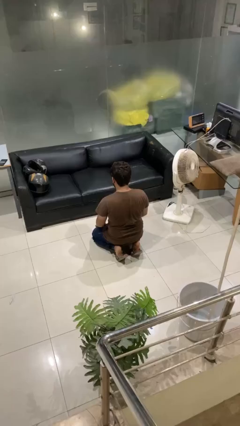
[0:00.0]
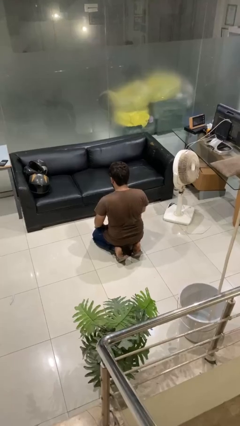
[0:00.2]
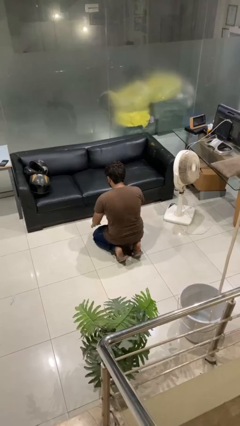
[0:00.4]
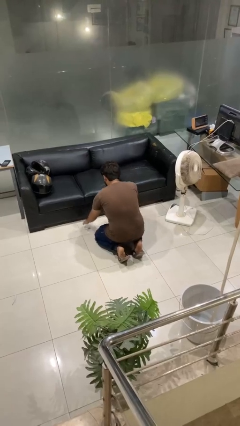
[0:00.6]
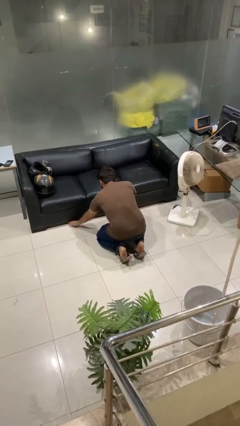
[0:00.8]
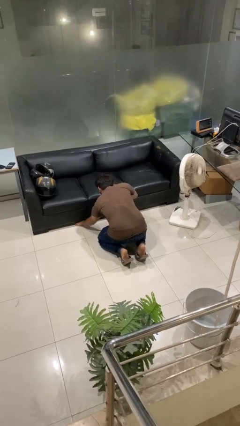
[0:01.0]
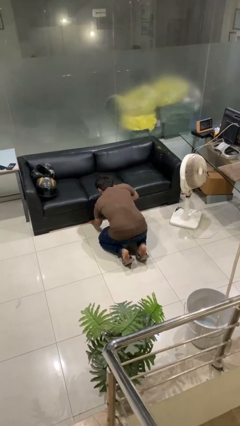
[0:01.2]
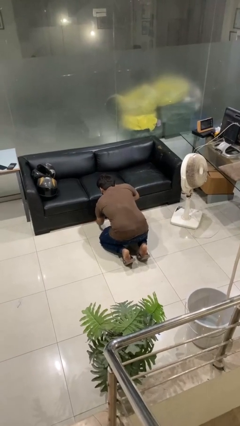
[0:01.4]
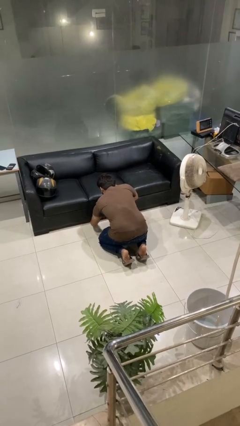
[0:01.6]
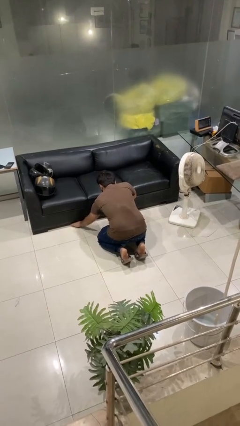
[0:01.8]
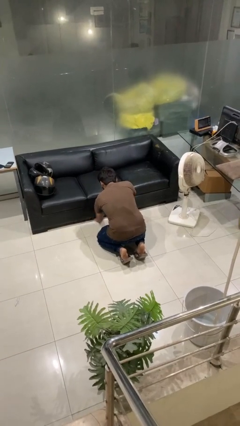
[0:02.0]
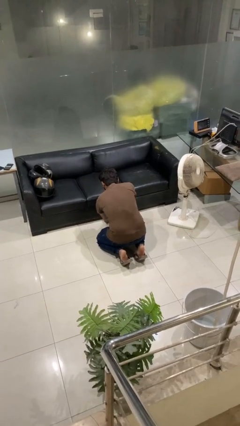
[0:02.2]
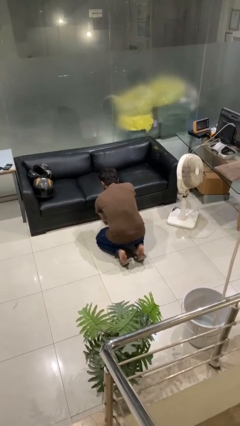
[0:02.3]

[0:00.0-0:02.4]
person searches under couch

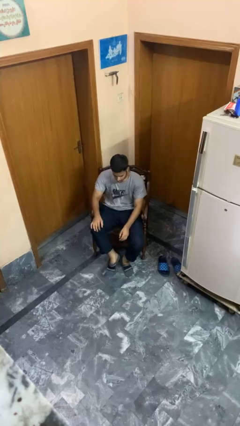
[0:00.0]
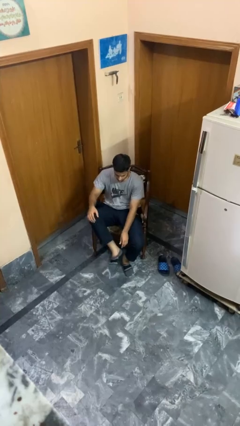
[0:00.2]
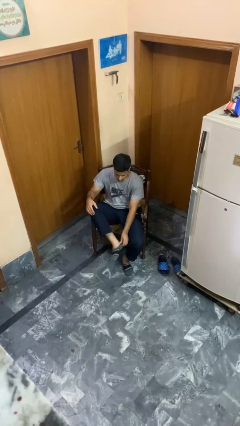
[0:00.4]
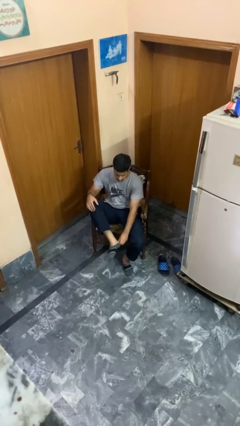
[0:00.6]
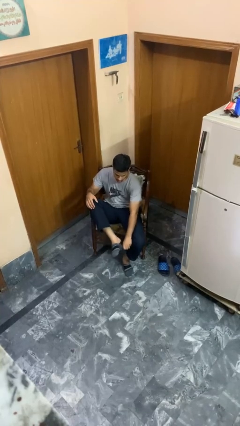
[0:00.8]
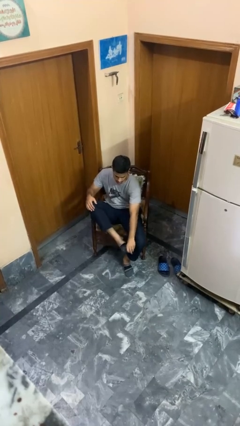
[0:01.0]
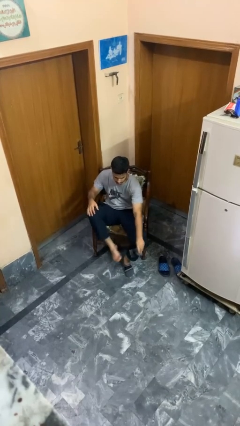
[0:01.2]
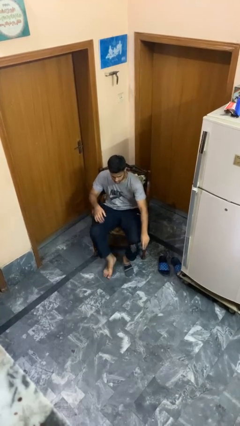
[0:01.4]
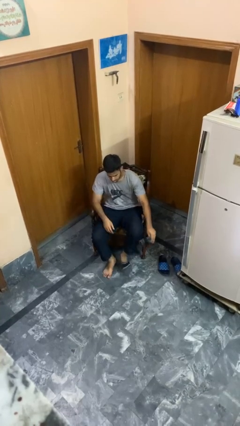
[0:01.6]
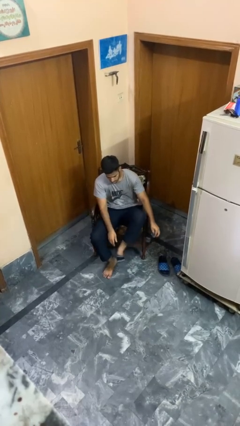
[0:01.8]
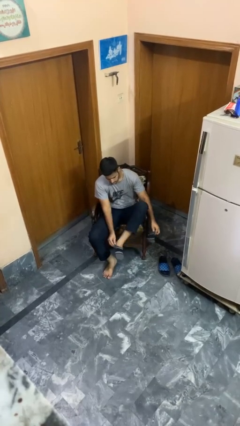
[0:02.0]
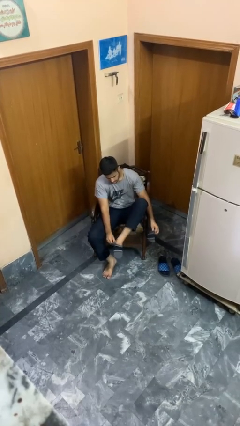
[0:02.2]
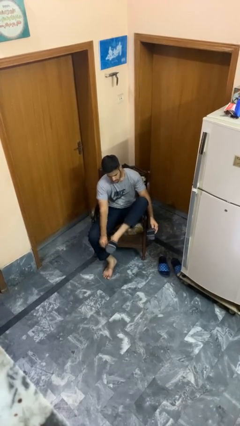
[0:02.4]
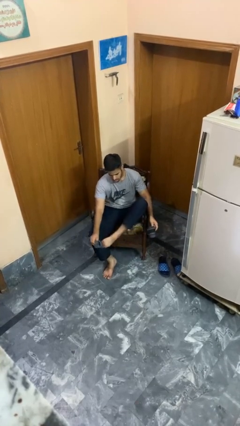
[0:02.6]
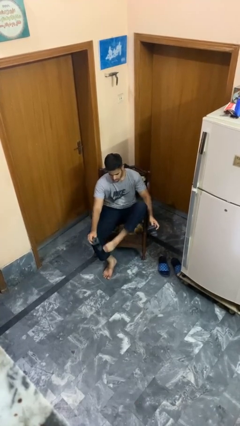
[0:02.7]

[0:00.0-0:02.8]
person takes off socks

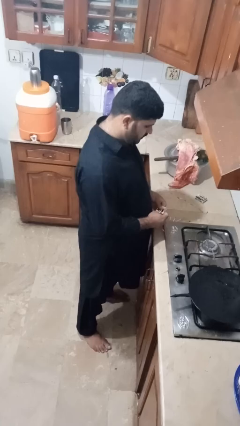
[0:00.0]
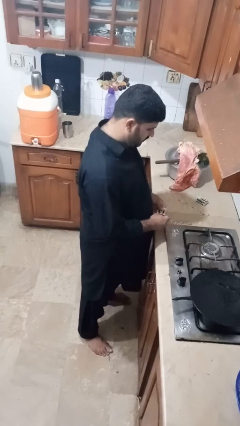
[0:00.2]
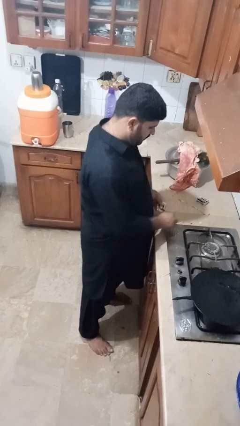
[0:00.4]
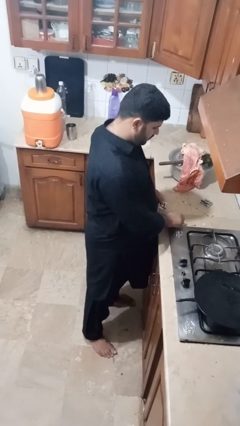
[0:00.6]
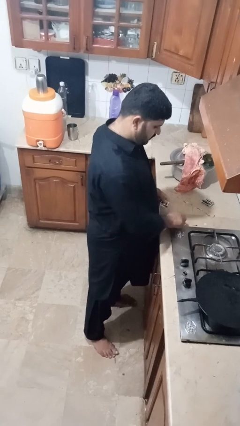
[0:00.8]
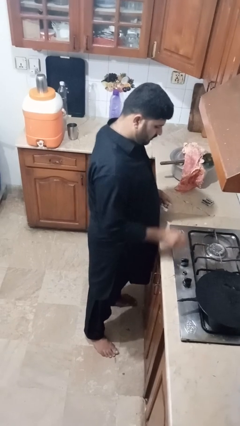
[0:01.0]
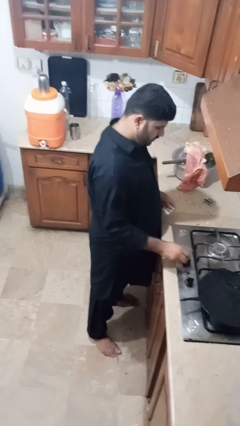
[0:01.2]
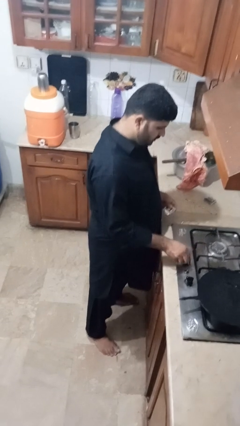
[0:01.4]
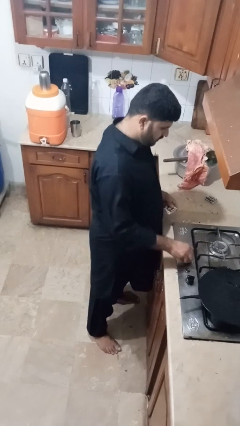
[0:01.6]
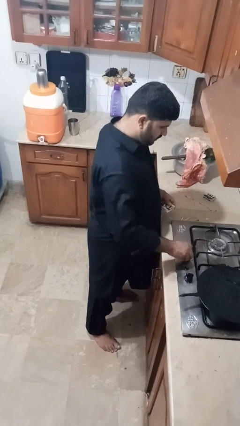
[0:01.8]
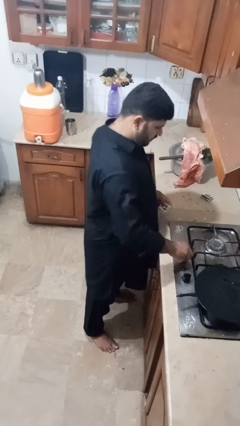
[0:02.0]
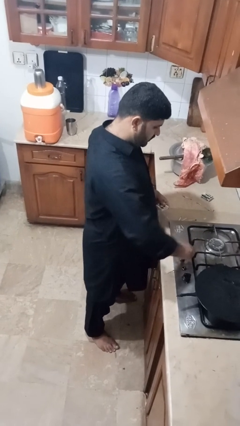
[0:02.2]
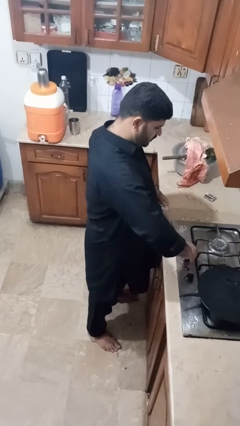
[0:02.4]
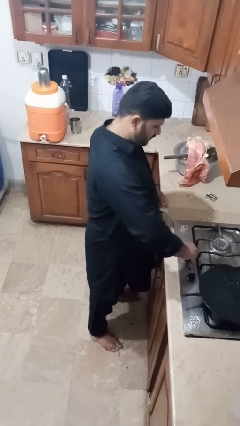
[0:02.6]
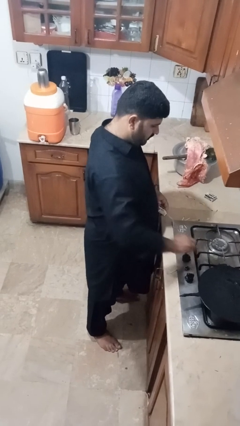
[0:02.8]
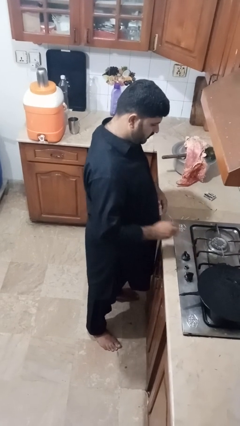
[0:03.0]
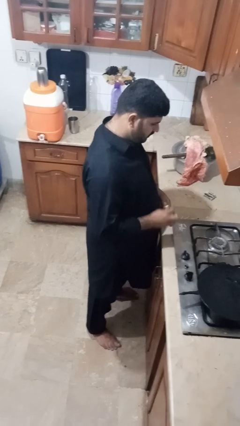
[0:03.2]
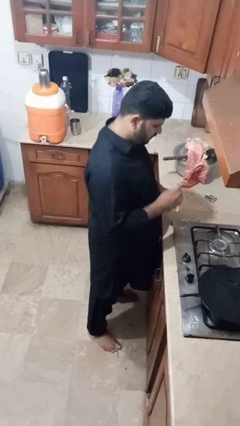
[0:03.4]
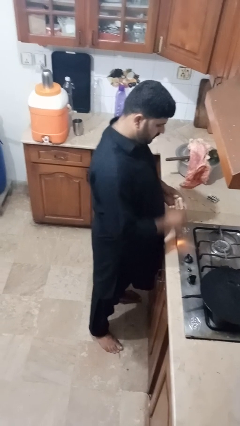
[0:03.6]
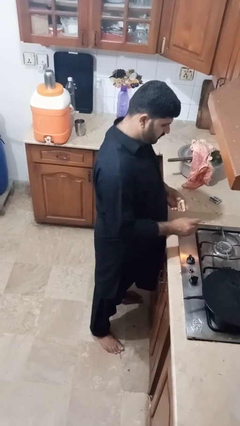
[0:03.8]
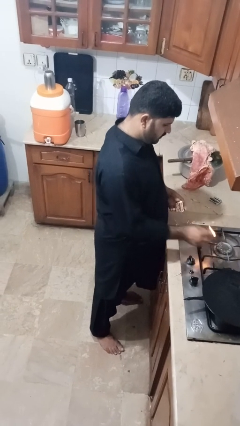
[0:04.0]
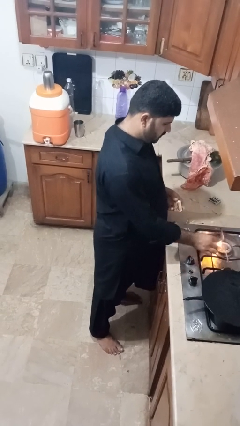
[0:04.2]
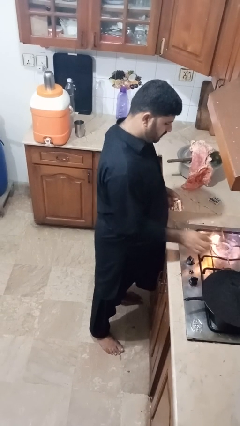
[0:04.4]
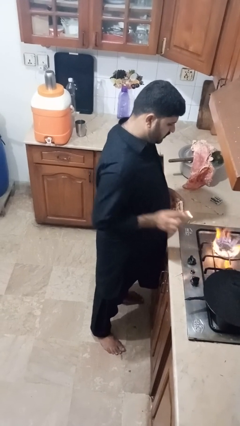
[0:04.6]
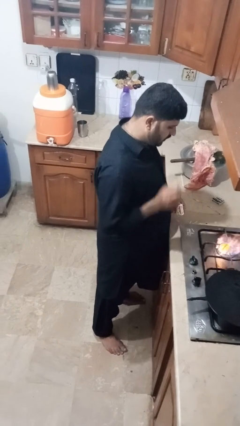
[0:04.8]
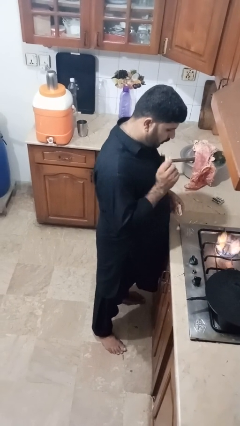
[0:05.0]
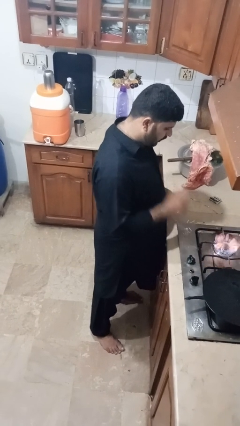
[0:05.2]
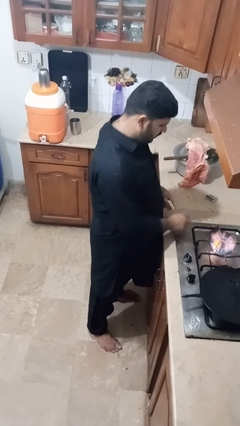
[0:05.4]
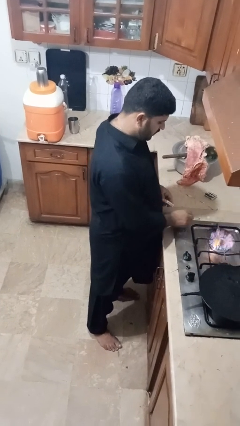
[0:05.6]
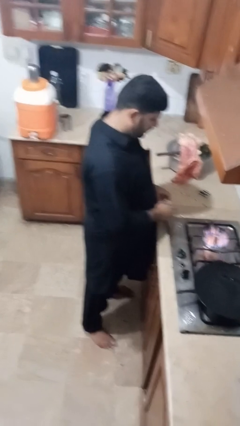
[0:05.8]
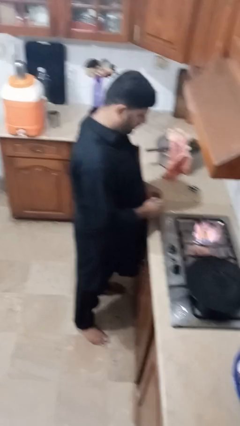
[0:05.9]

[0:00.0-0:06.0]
person turns on stovetop

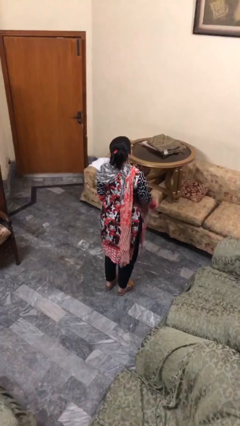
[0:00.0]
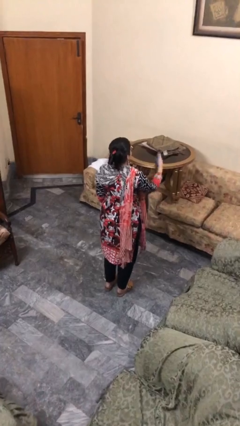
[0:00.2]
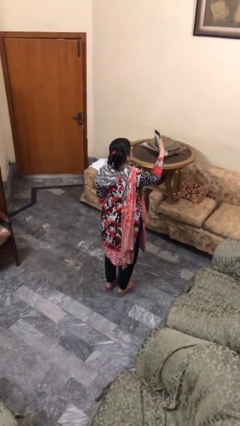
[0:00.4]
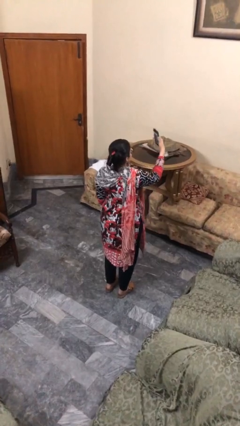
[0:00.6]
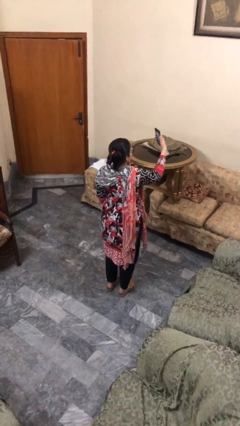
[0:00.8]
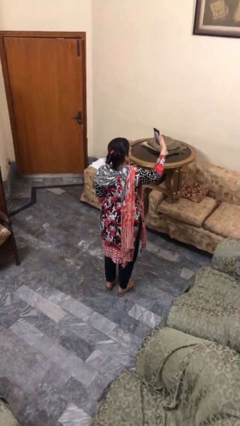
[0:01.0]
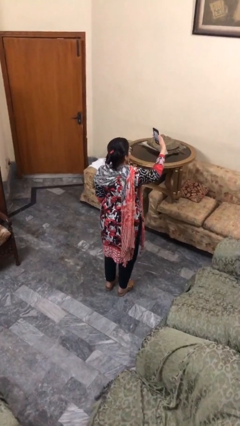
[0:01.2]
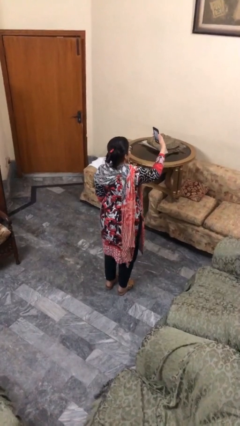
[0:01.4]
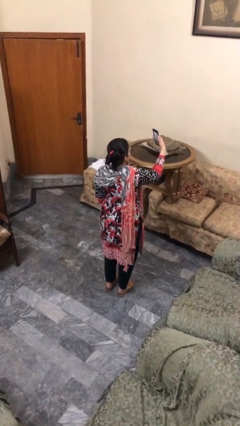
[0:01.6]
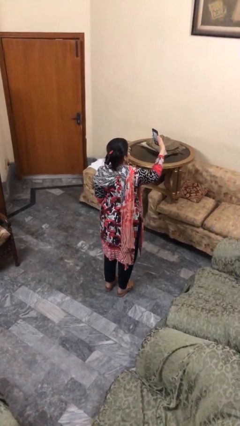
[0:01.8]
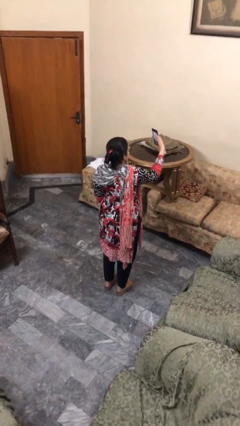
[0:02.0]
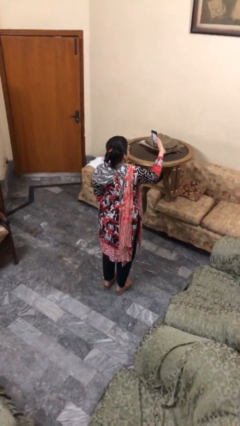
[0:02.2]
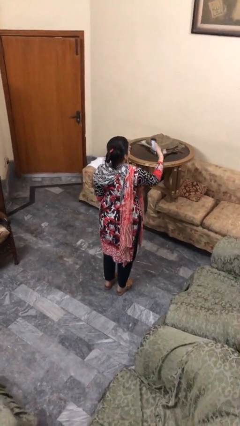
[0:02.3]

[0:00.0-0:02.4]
person takes selfie

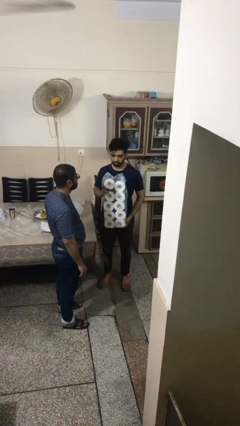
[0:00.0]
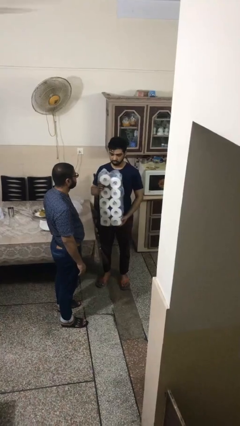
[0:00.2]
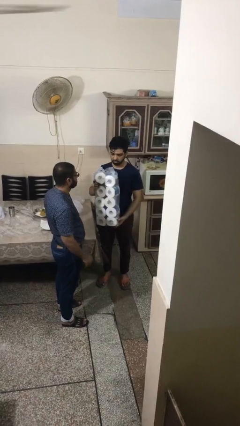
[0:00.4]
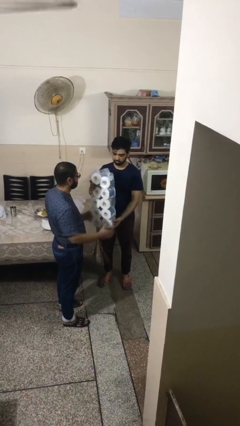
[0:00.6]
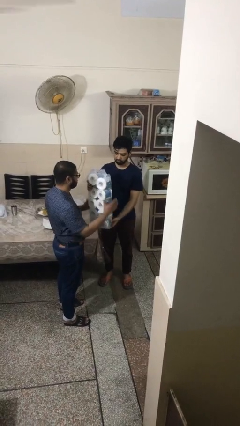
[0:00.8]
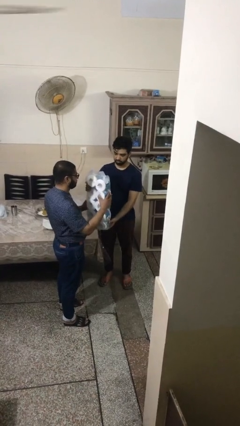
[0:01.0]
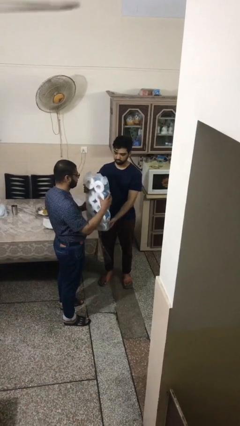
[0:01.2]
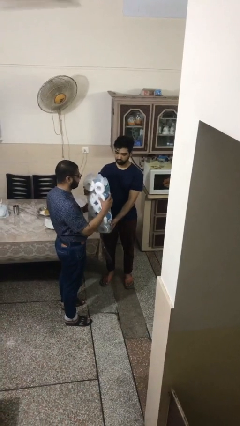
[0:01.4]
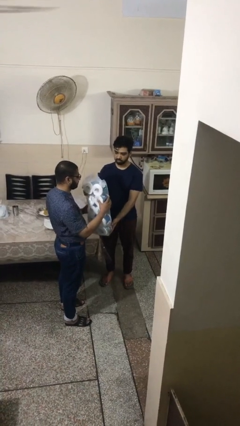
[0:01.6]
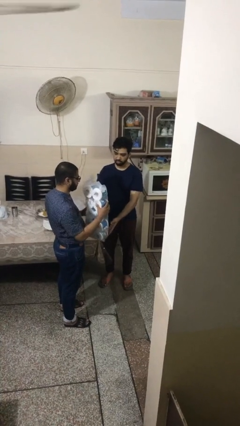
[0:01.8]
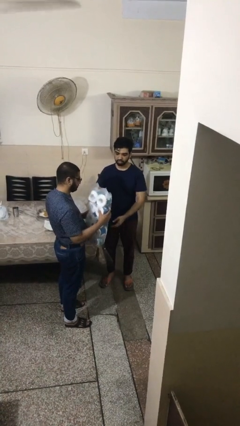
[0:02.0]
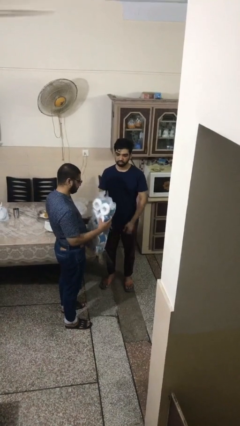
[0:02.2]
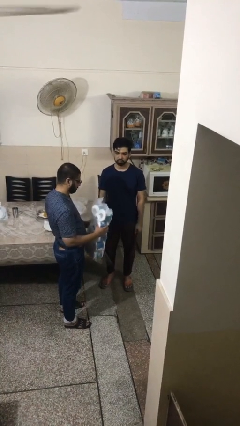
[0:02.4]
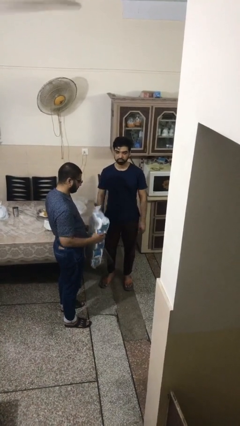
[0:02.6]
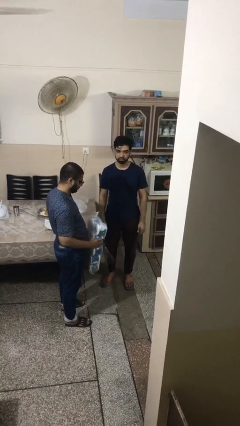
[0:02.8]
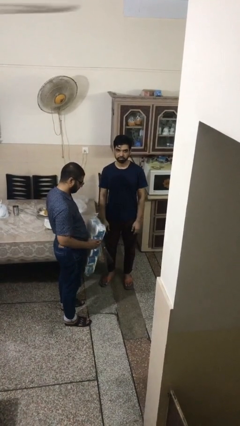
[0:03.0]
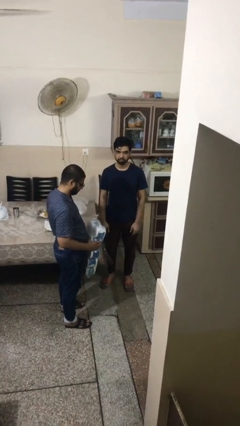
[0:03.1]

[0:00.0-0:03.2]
person transfers object to person

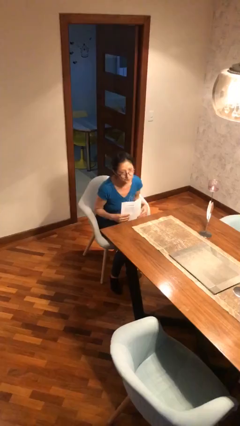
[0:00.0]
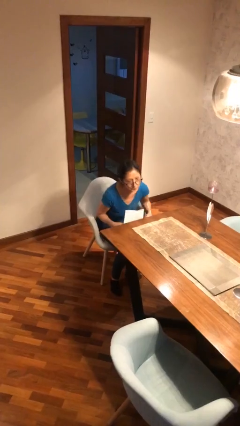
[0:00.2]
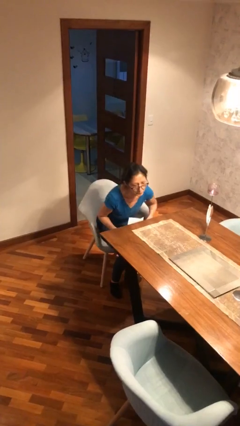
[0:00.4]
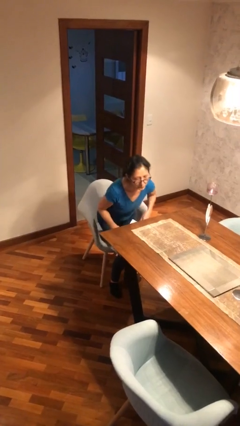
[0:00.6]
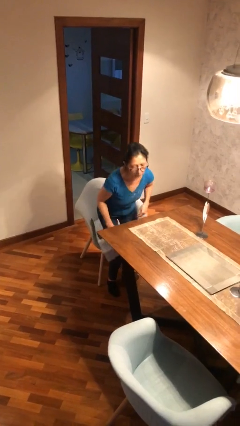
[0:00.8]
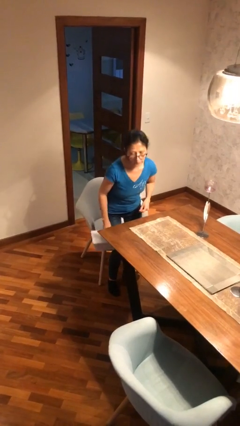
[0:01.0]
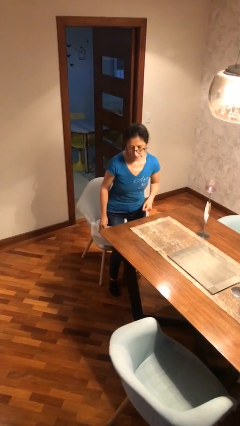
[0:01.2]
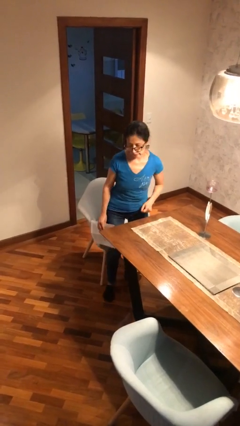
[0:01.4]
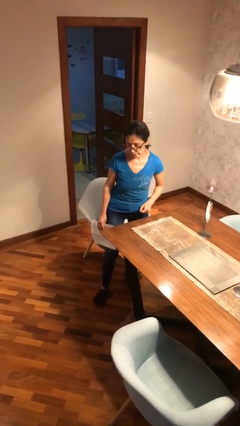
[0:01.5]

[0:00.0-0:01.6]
person stands up
